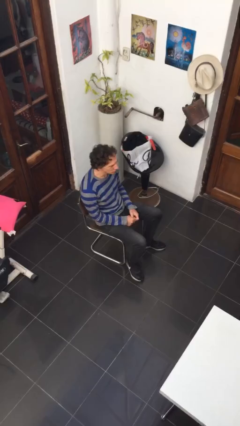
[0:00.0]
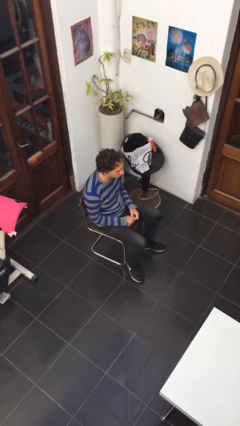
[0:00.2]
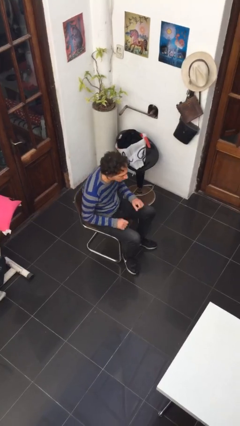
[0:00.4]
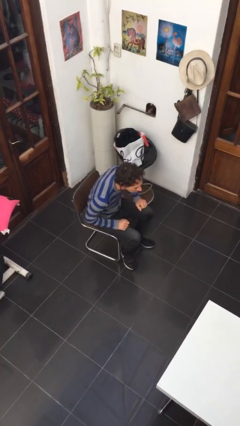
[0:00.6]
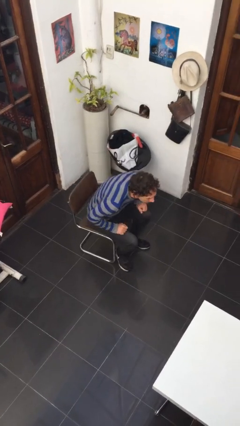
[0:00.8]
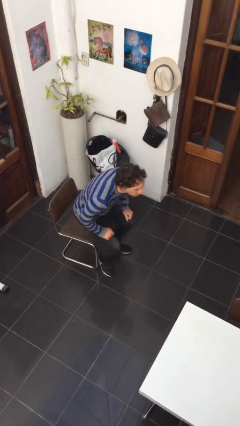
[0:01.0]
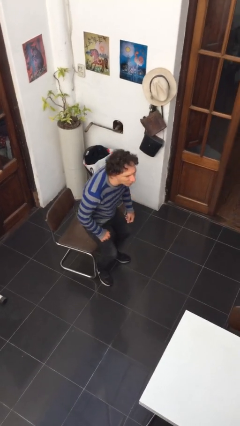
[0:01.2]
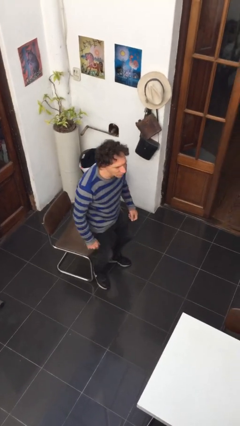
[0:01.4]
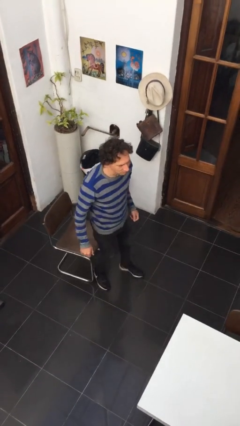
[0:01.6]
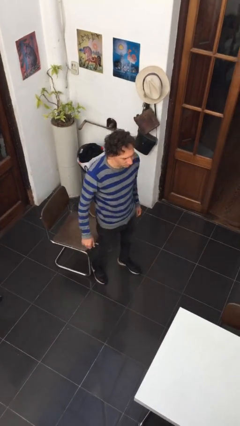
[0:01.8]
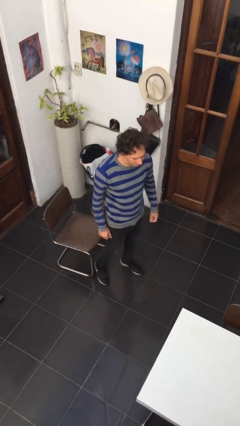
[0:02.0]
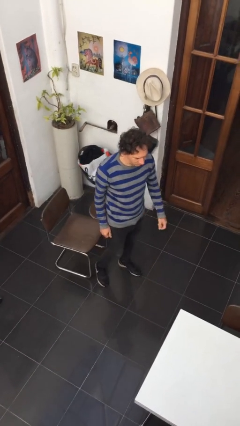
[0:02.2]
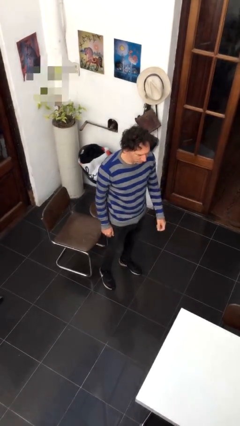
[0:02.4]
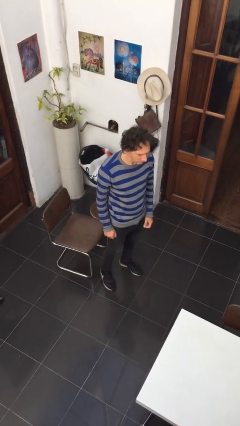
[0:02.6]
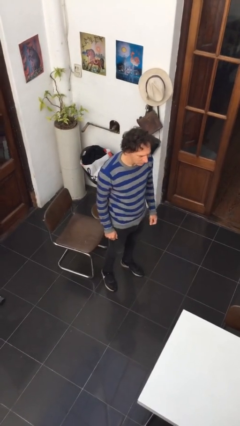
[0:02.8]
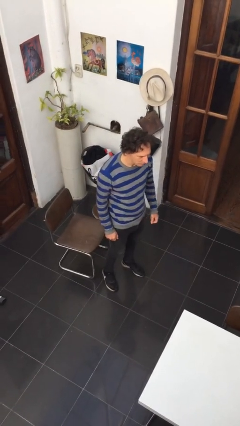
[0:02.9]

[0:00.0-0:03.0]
person stands up

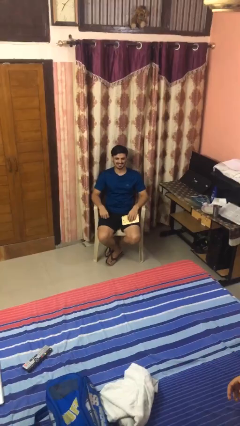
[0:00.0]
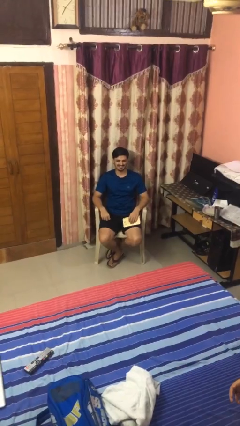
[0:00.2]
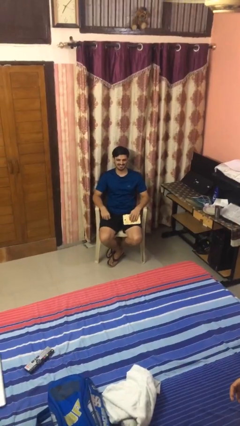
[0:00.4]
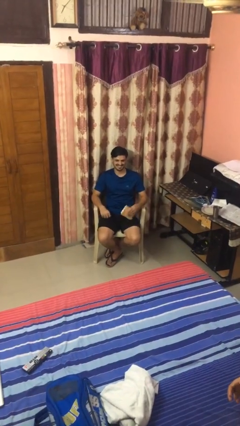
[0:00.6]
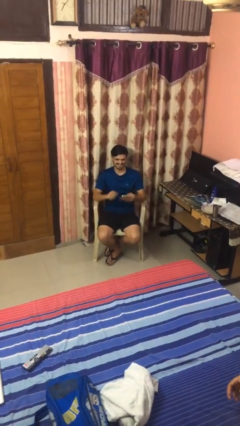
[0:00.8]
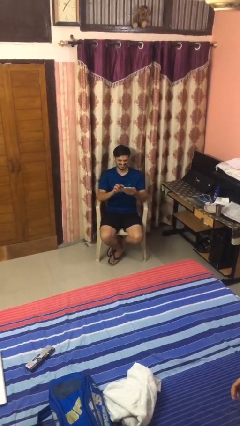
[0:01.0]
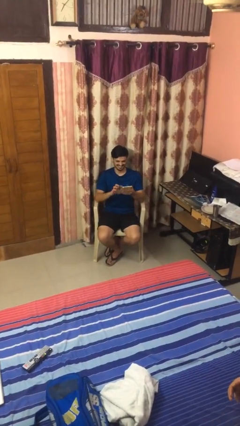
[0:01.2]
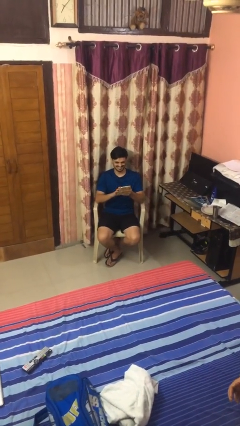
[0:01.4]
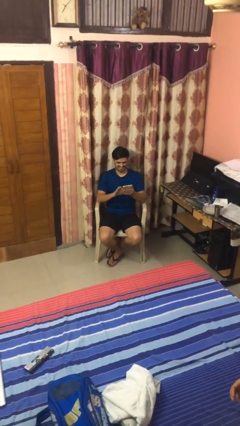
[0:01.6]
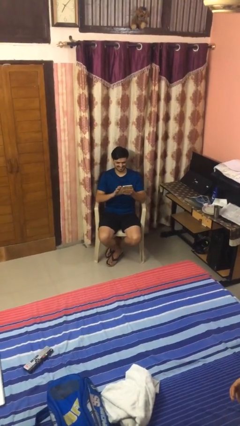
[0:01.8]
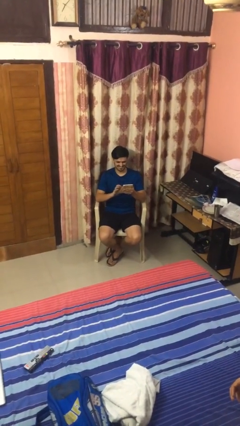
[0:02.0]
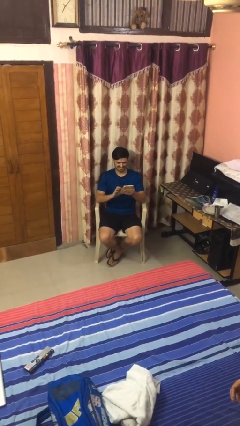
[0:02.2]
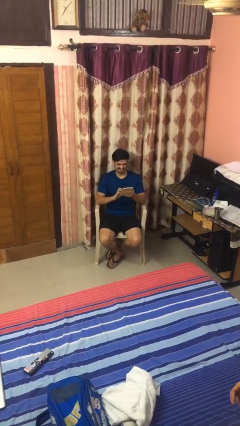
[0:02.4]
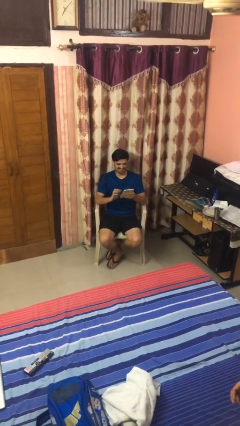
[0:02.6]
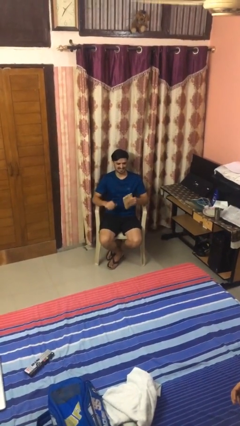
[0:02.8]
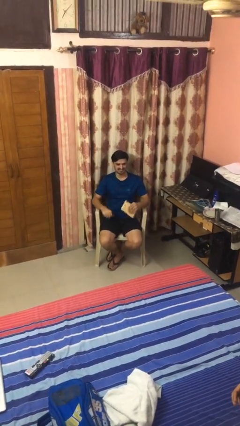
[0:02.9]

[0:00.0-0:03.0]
person interacts with tablet

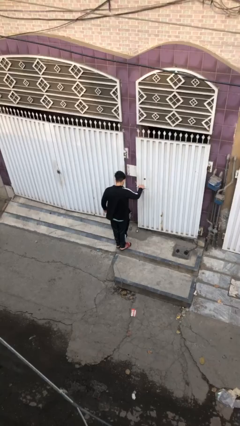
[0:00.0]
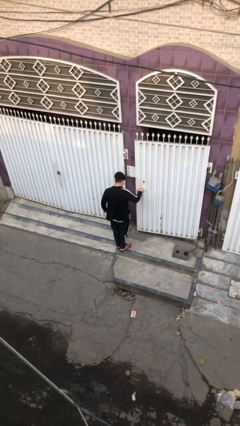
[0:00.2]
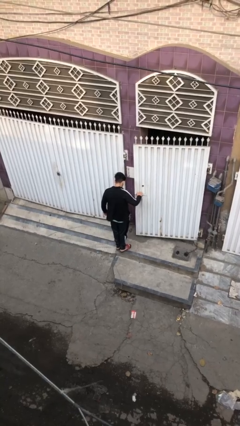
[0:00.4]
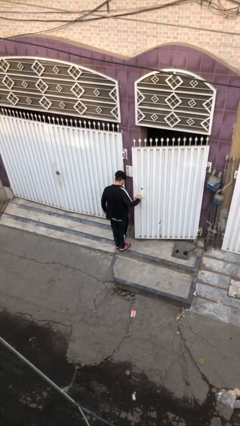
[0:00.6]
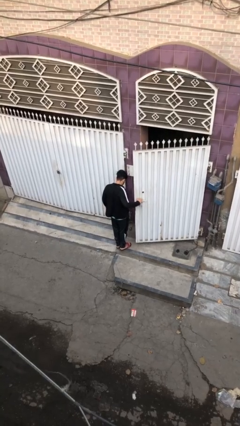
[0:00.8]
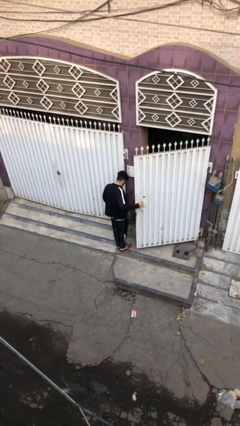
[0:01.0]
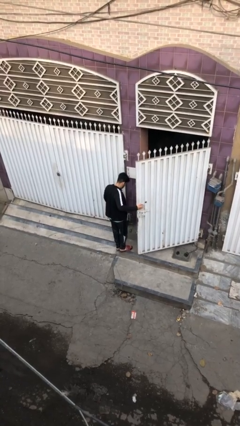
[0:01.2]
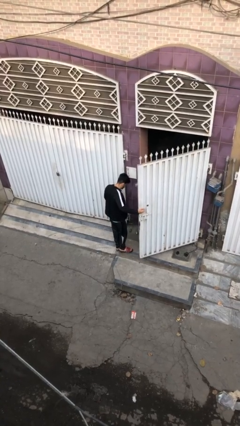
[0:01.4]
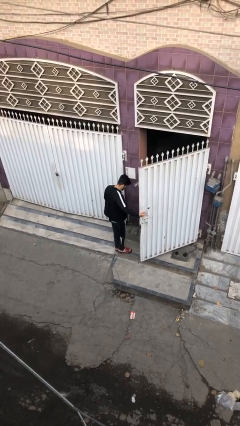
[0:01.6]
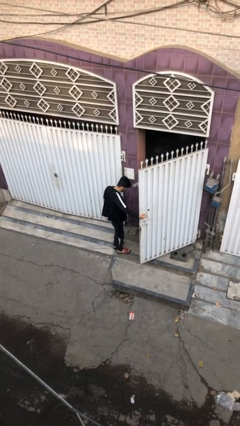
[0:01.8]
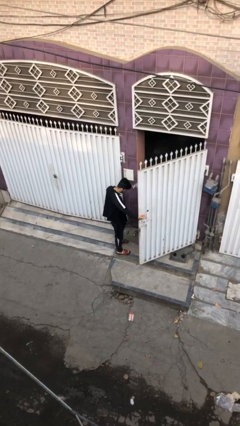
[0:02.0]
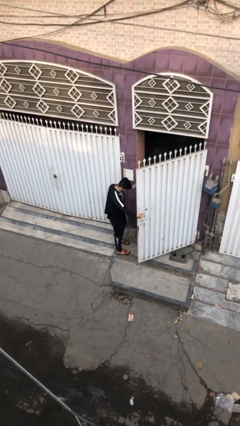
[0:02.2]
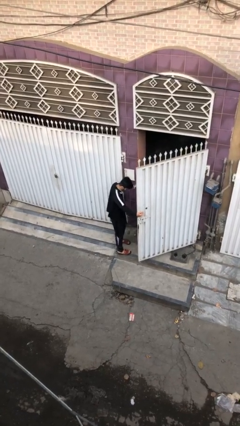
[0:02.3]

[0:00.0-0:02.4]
person opens facility door

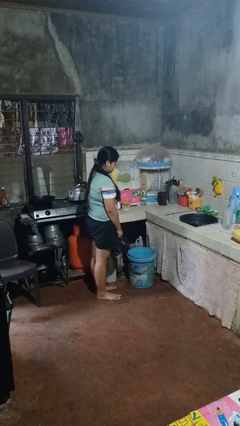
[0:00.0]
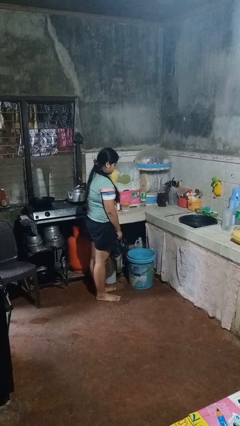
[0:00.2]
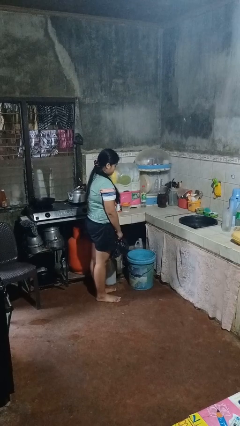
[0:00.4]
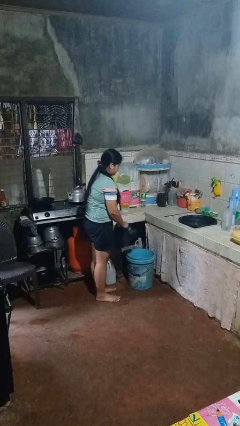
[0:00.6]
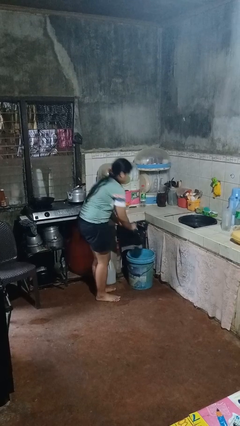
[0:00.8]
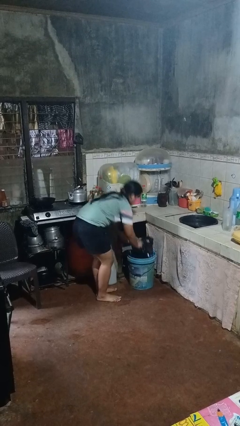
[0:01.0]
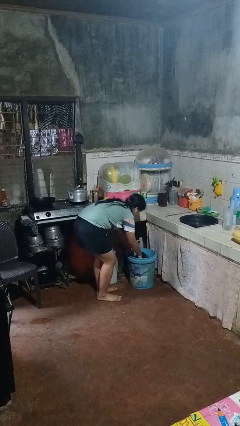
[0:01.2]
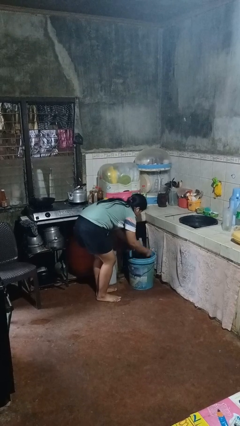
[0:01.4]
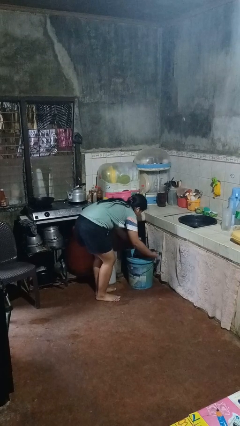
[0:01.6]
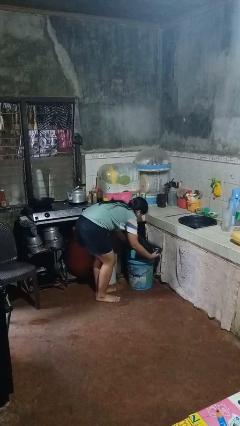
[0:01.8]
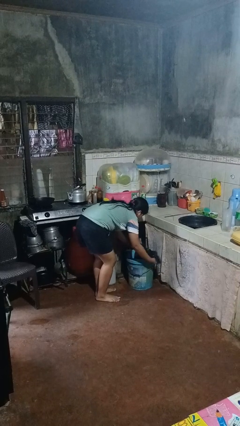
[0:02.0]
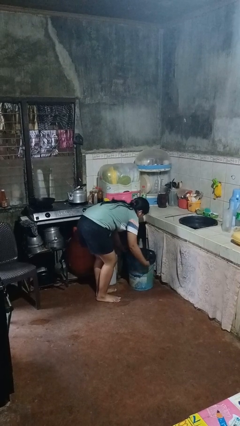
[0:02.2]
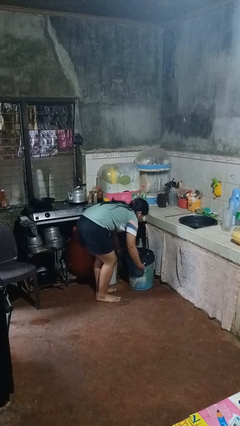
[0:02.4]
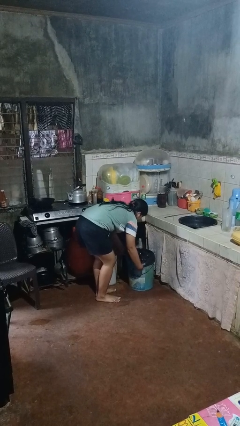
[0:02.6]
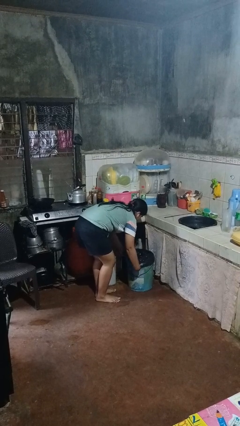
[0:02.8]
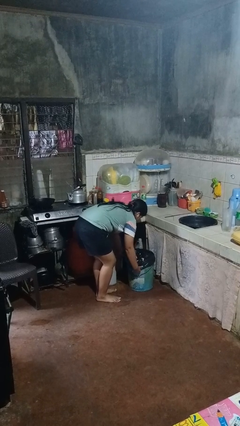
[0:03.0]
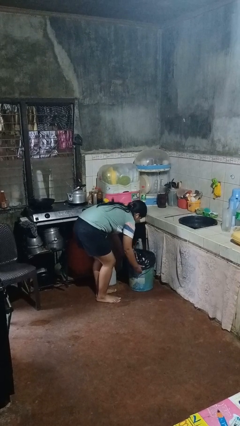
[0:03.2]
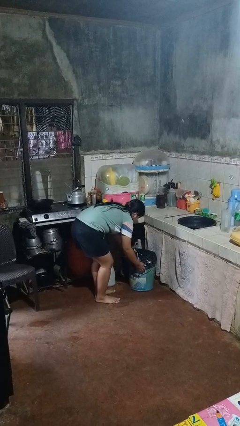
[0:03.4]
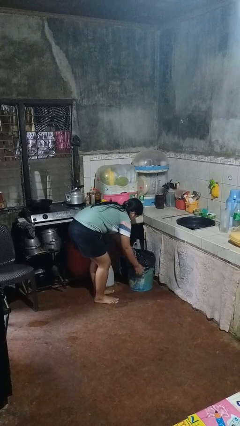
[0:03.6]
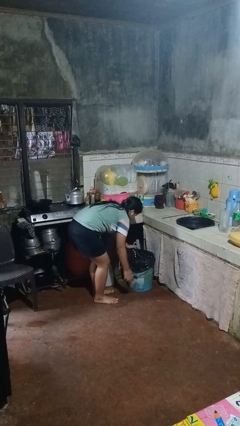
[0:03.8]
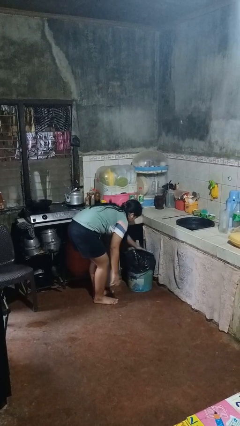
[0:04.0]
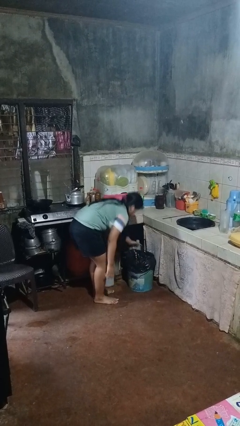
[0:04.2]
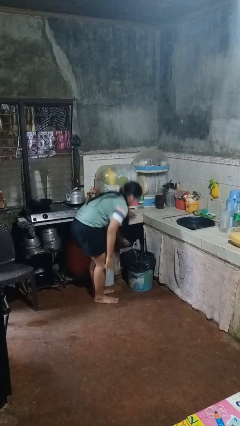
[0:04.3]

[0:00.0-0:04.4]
person inserts trashbag into trashcan

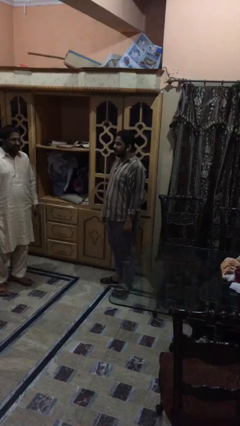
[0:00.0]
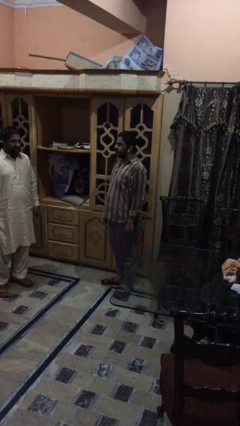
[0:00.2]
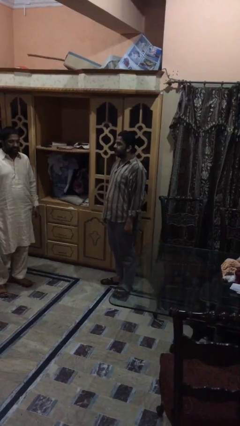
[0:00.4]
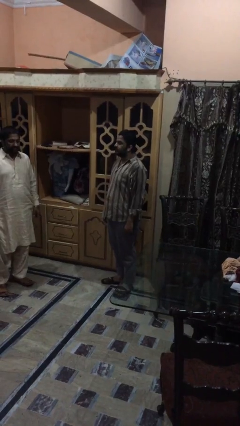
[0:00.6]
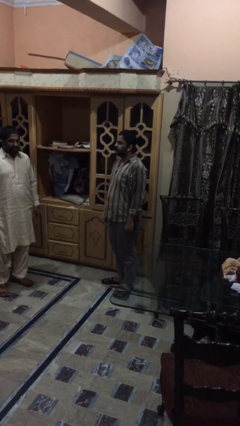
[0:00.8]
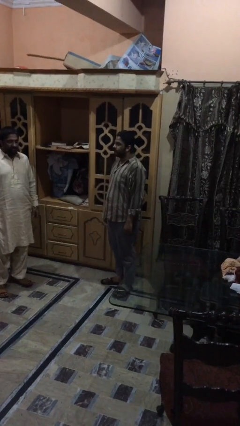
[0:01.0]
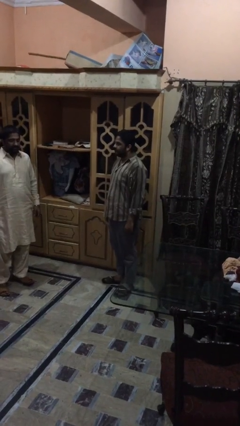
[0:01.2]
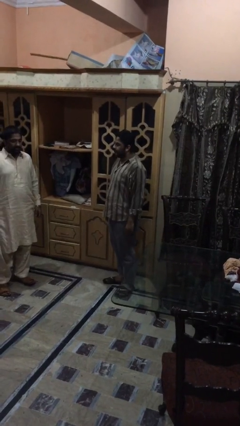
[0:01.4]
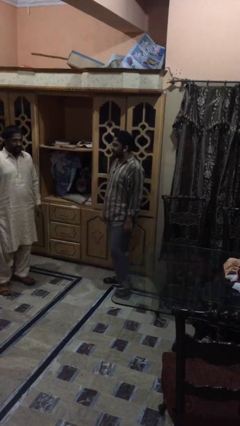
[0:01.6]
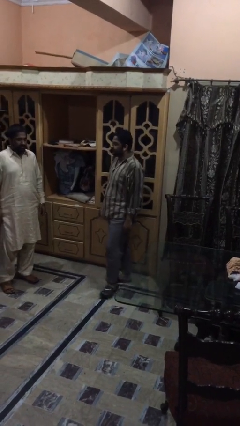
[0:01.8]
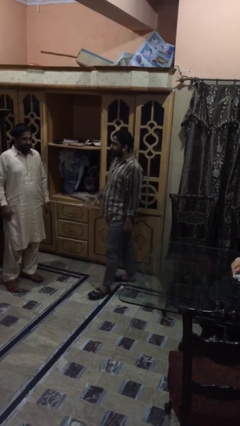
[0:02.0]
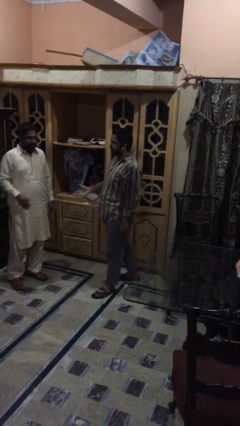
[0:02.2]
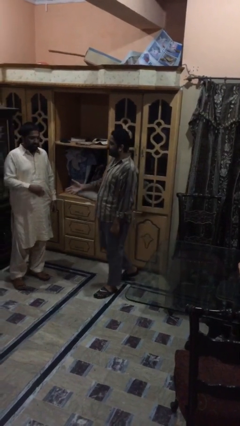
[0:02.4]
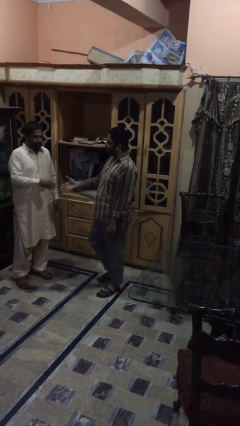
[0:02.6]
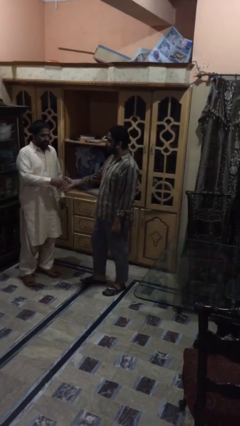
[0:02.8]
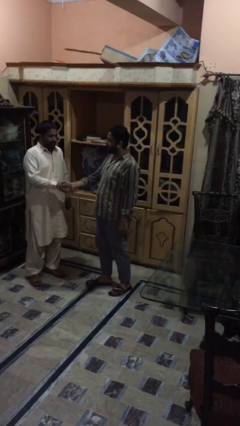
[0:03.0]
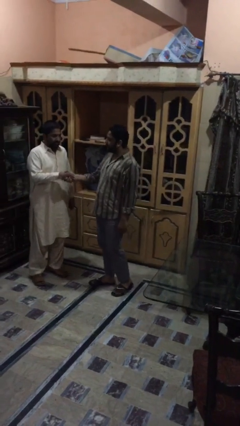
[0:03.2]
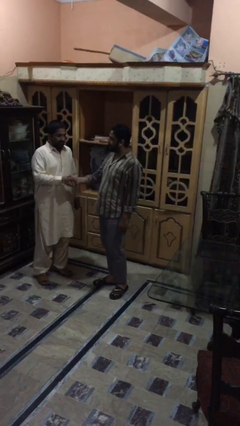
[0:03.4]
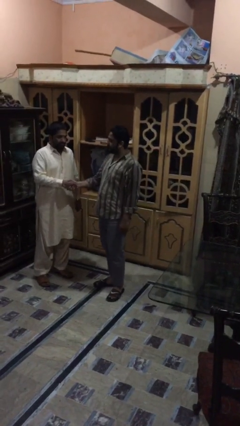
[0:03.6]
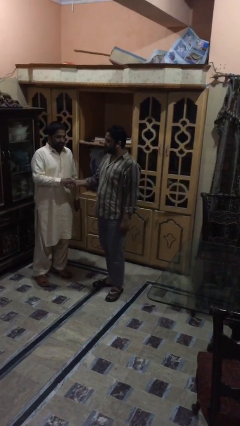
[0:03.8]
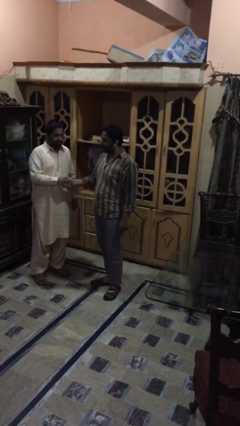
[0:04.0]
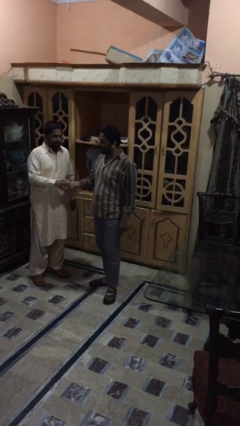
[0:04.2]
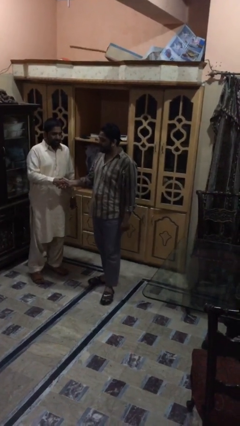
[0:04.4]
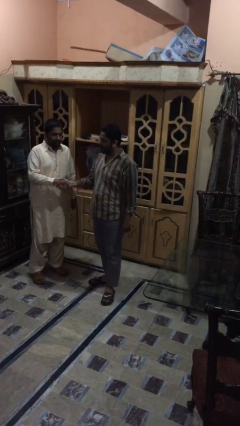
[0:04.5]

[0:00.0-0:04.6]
person shakes hand
